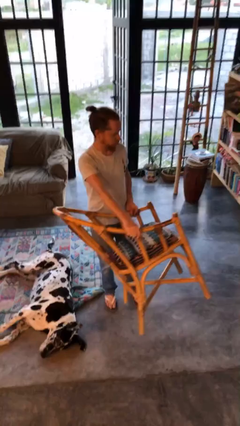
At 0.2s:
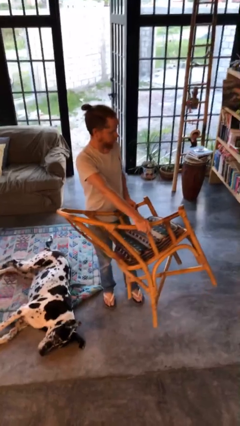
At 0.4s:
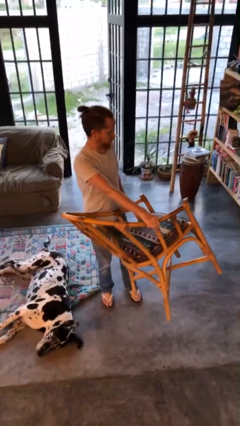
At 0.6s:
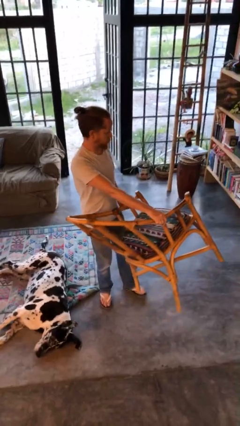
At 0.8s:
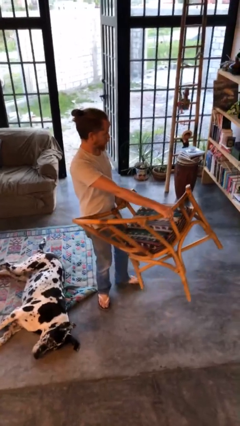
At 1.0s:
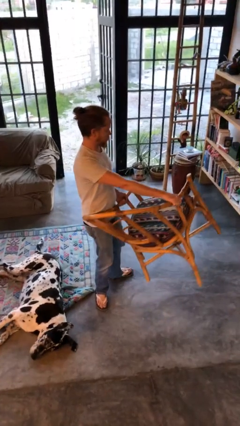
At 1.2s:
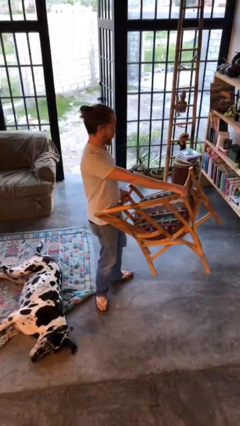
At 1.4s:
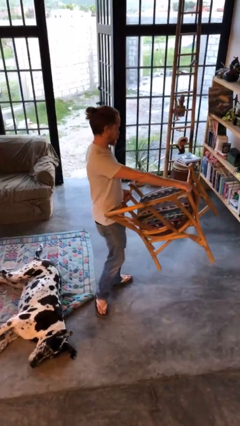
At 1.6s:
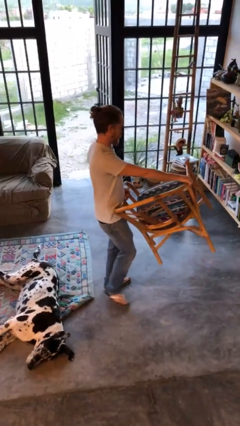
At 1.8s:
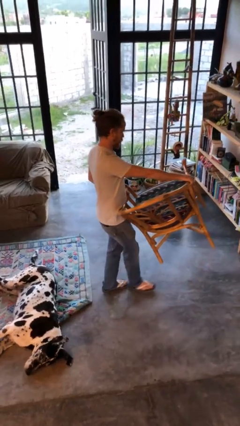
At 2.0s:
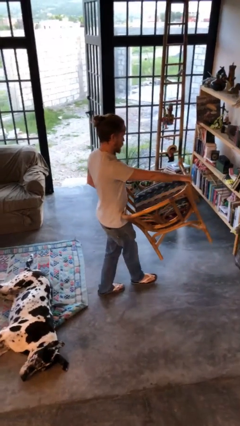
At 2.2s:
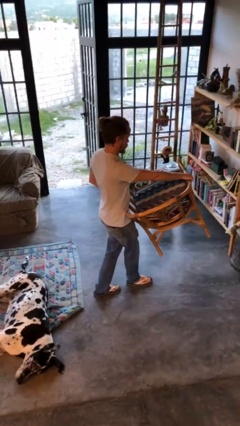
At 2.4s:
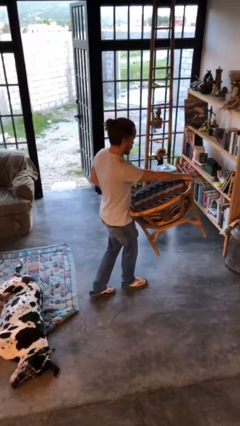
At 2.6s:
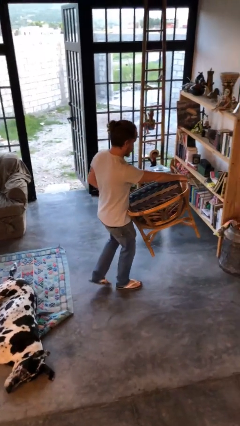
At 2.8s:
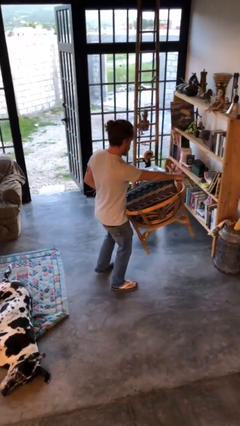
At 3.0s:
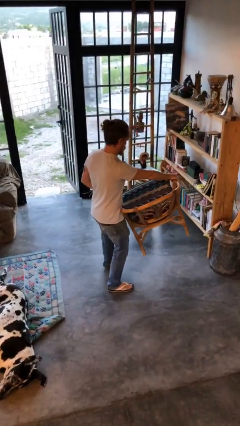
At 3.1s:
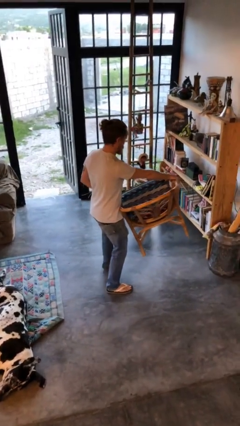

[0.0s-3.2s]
person carries furniture

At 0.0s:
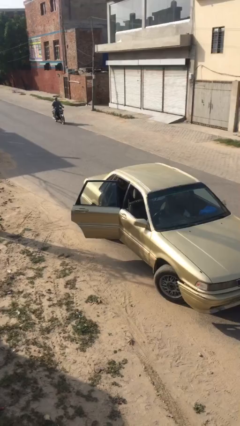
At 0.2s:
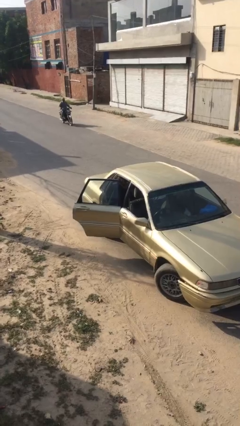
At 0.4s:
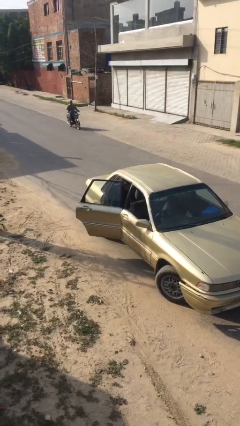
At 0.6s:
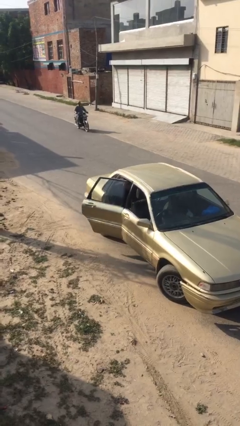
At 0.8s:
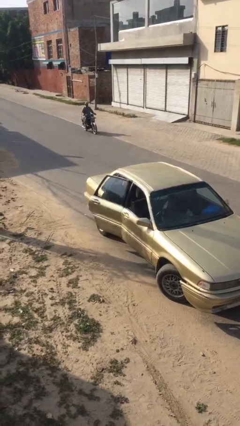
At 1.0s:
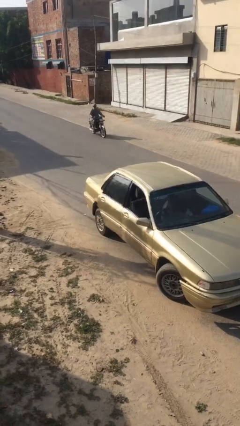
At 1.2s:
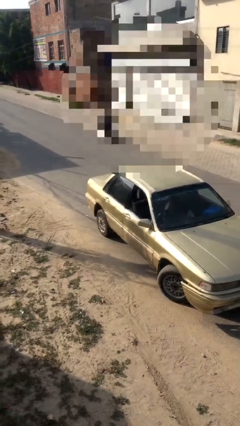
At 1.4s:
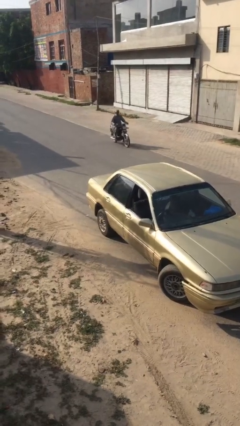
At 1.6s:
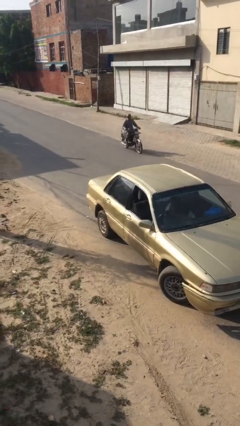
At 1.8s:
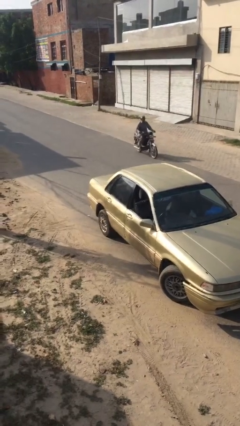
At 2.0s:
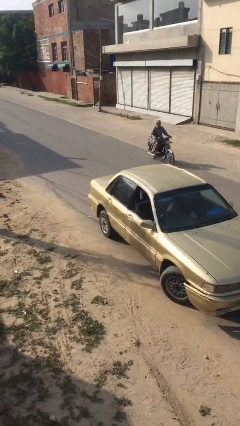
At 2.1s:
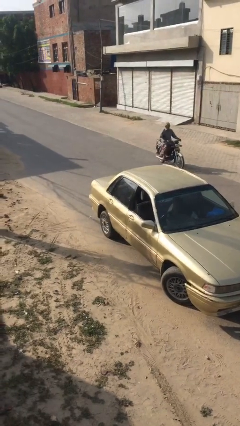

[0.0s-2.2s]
person closes car door

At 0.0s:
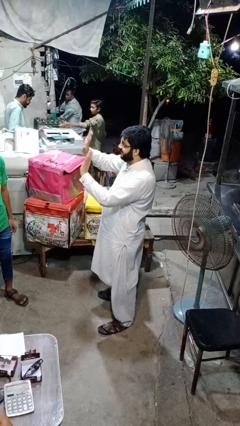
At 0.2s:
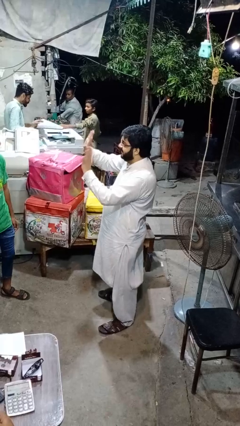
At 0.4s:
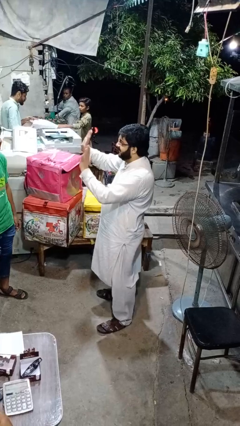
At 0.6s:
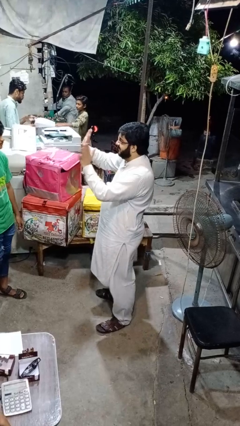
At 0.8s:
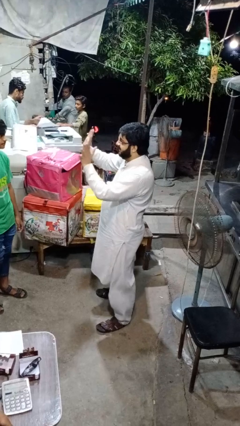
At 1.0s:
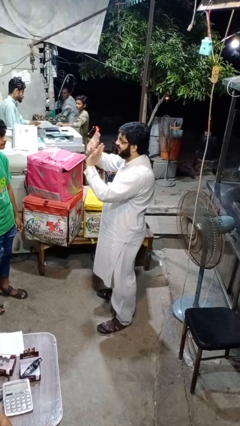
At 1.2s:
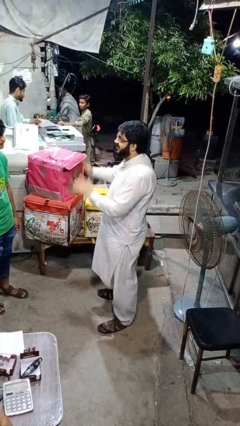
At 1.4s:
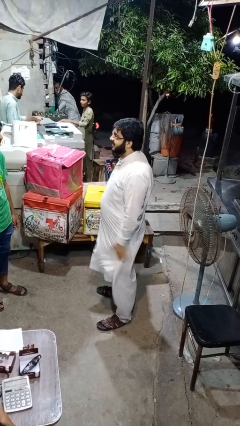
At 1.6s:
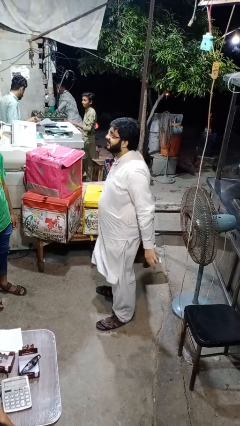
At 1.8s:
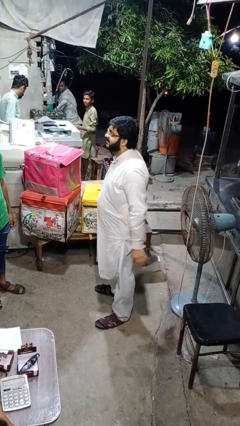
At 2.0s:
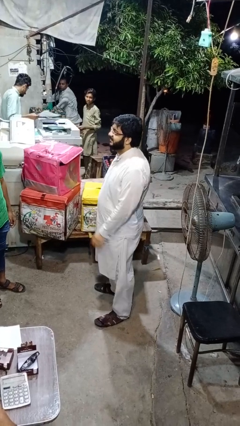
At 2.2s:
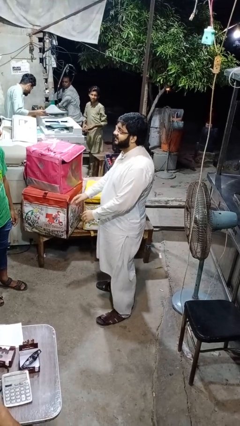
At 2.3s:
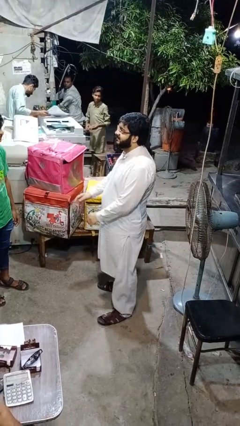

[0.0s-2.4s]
person waves at person

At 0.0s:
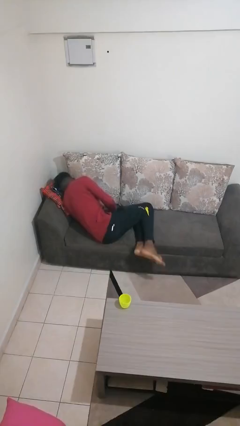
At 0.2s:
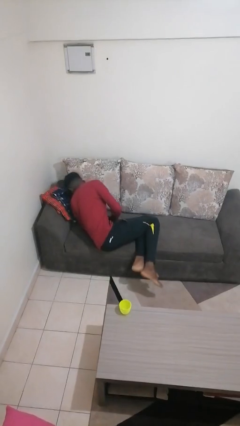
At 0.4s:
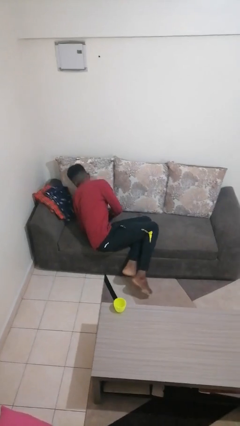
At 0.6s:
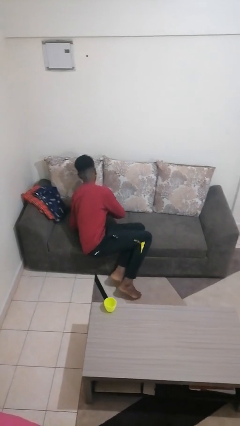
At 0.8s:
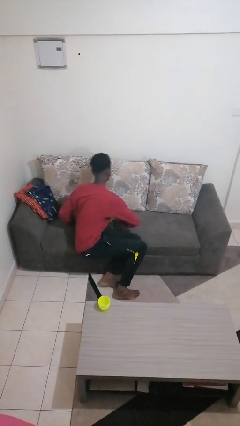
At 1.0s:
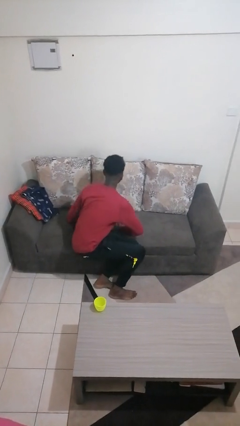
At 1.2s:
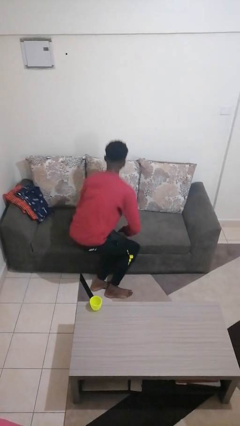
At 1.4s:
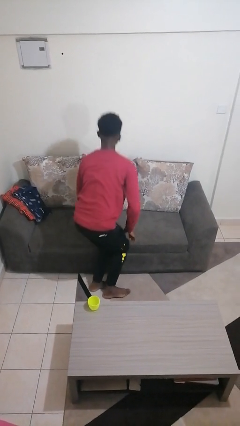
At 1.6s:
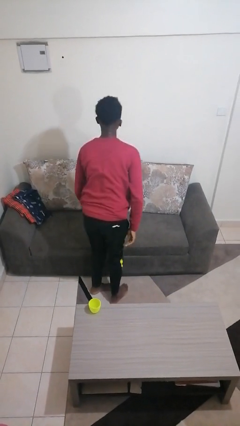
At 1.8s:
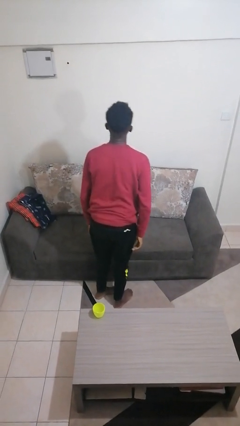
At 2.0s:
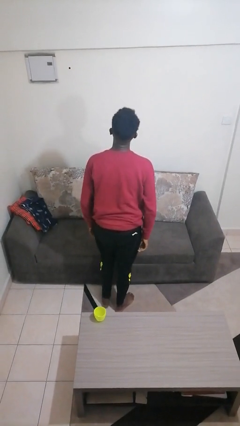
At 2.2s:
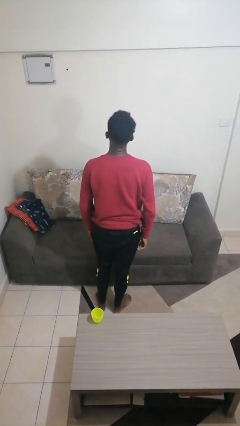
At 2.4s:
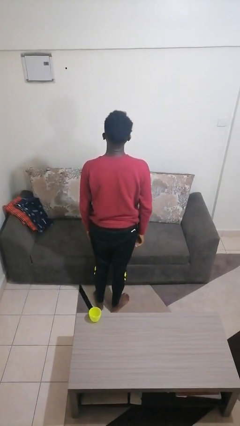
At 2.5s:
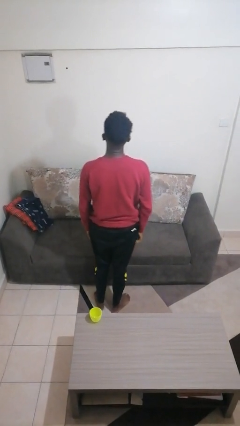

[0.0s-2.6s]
person stands up

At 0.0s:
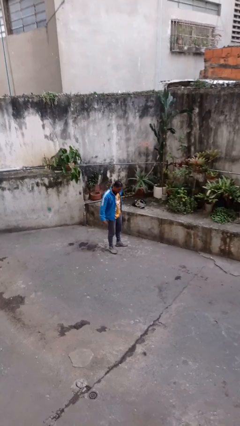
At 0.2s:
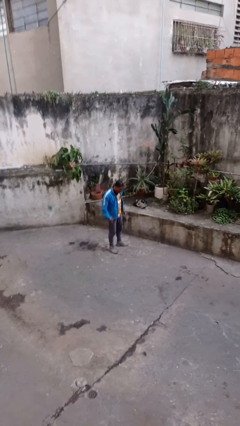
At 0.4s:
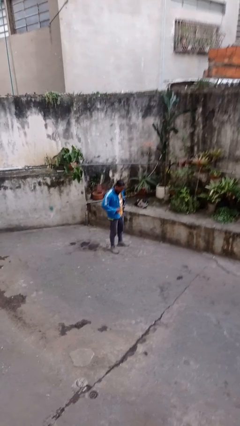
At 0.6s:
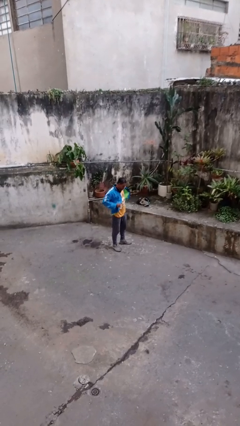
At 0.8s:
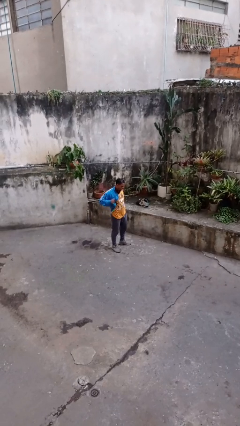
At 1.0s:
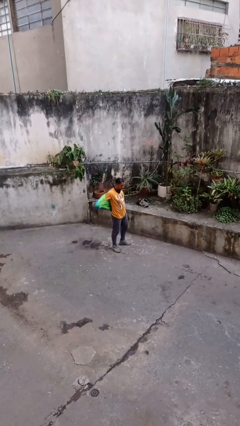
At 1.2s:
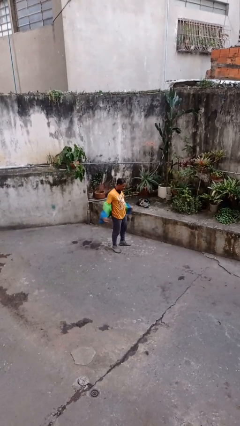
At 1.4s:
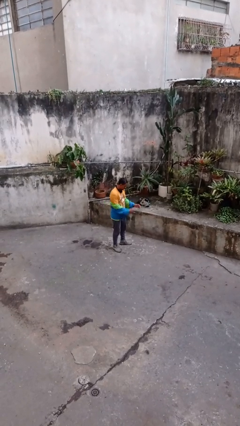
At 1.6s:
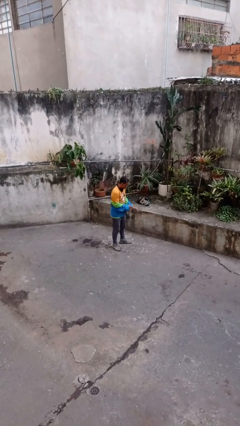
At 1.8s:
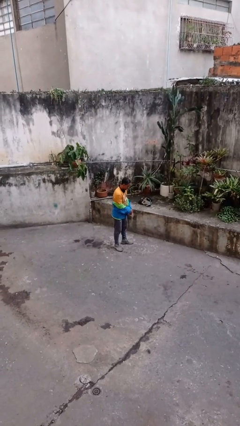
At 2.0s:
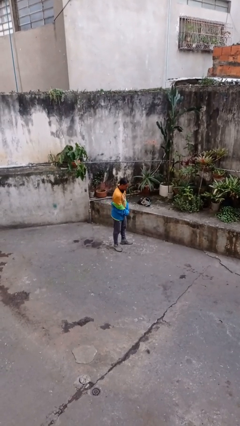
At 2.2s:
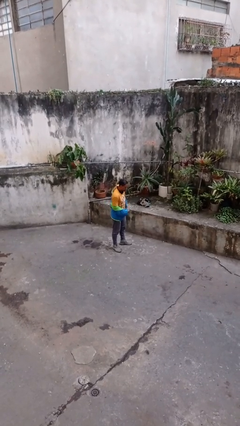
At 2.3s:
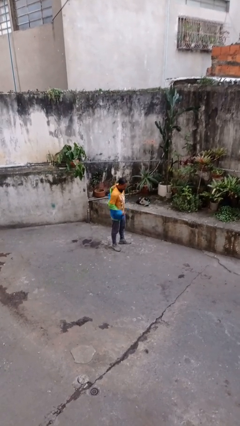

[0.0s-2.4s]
person takes off jacket

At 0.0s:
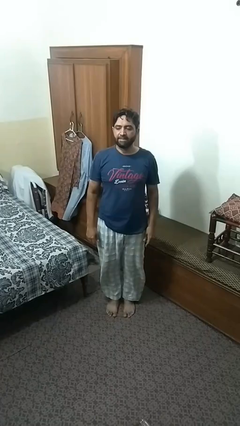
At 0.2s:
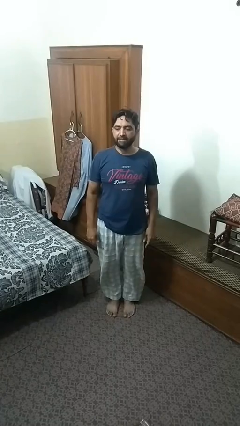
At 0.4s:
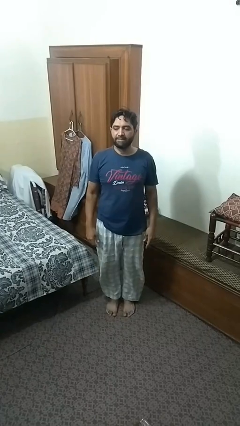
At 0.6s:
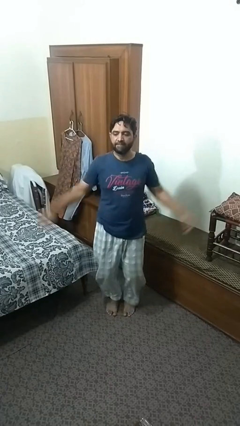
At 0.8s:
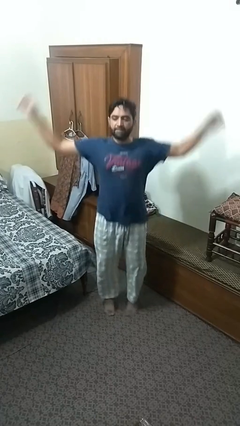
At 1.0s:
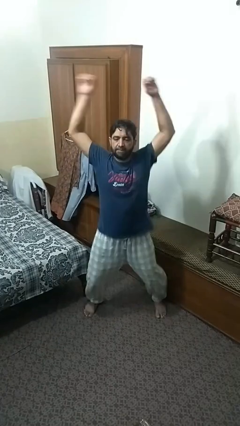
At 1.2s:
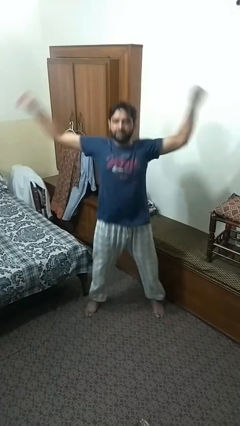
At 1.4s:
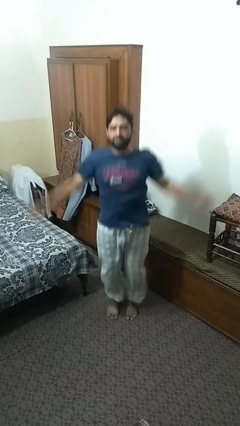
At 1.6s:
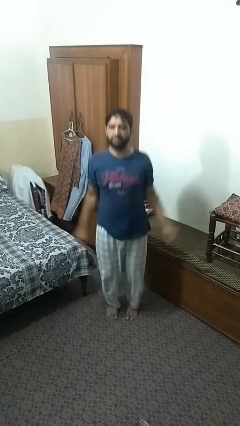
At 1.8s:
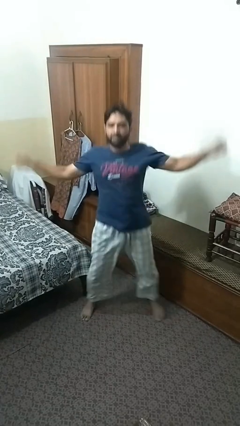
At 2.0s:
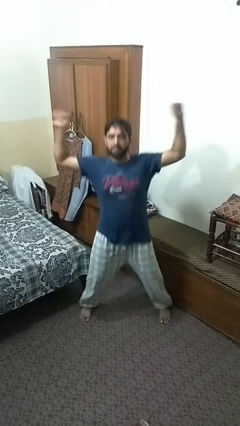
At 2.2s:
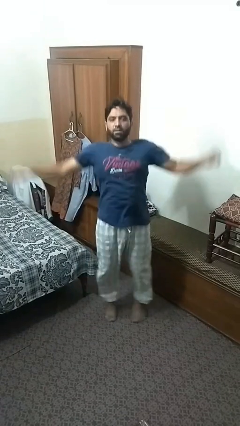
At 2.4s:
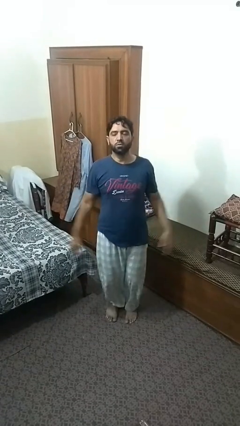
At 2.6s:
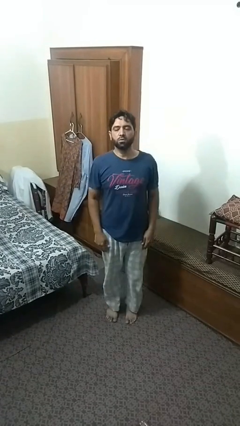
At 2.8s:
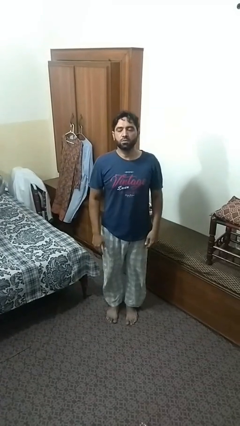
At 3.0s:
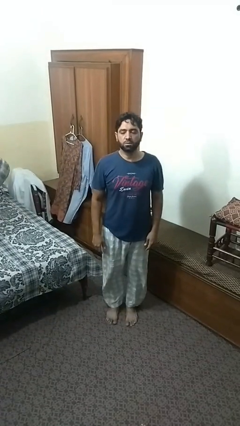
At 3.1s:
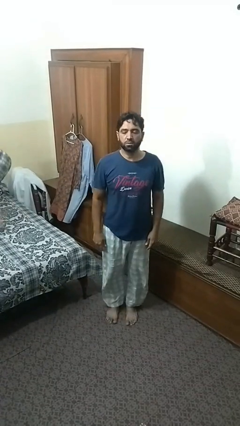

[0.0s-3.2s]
person exercises with jumping jacks

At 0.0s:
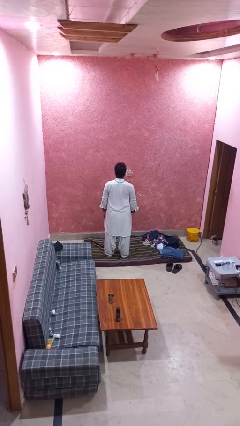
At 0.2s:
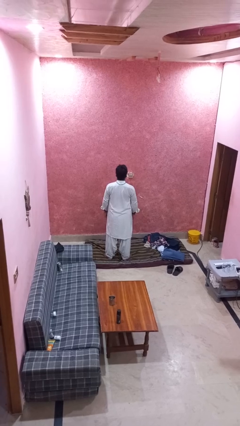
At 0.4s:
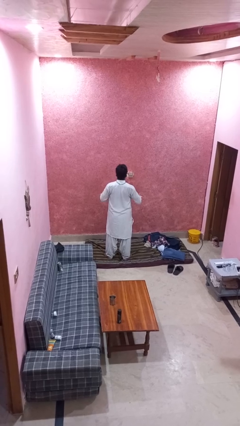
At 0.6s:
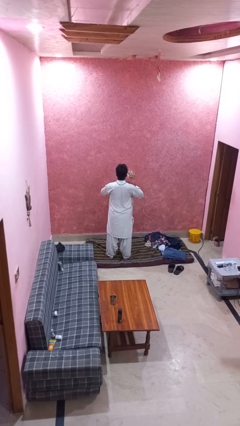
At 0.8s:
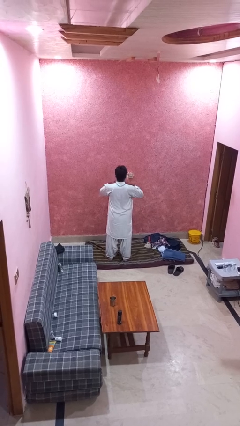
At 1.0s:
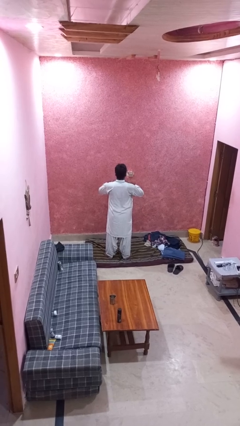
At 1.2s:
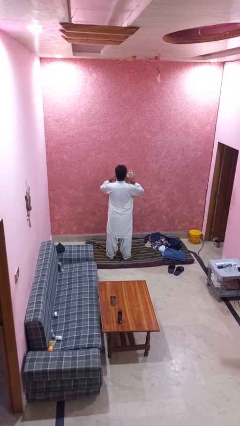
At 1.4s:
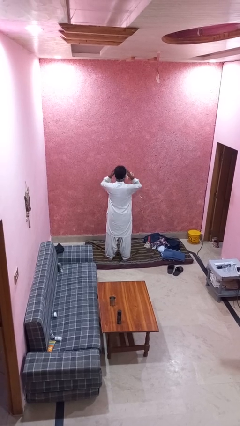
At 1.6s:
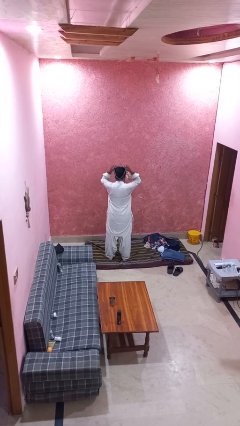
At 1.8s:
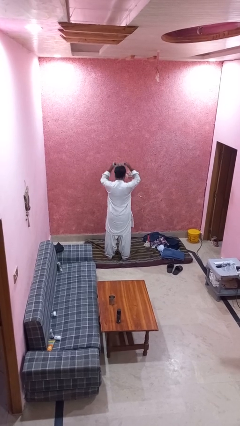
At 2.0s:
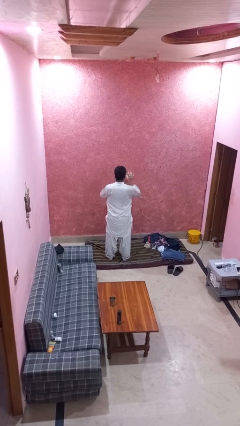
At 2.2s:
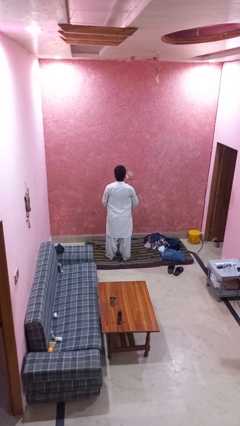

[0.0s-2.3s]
person takes off necklace
